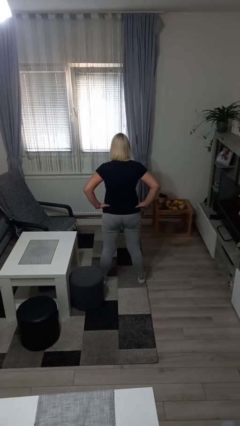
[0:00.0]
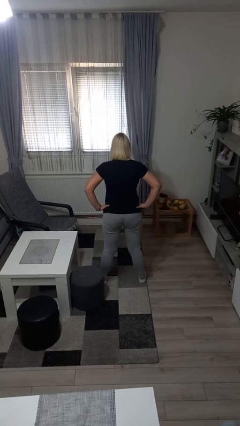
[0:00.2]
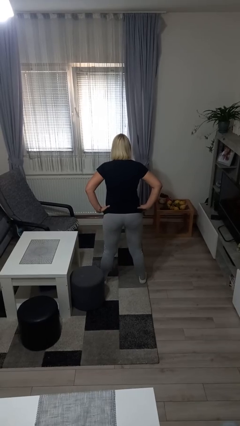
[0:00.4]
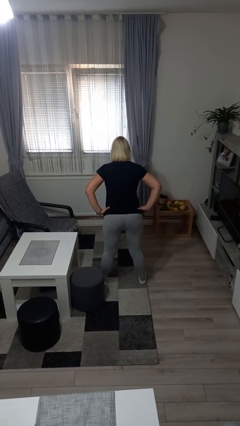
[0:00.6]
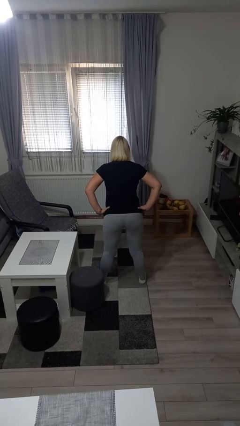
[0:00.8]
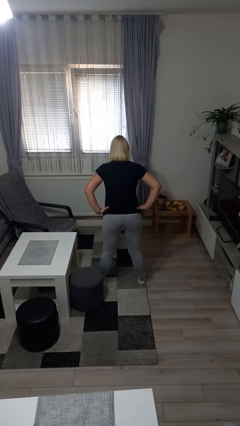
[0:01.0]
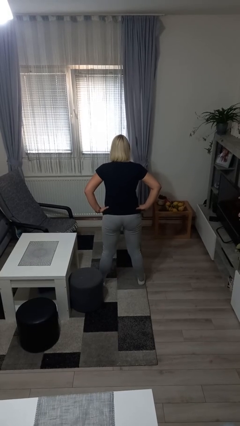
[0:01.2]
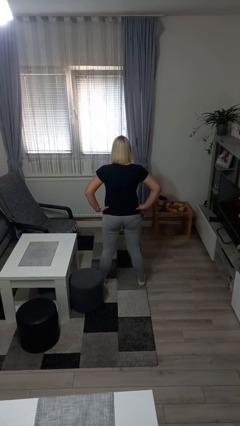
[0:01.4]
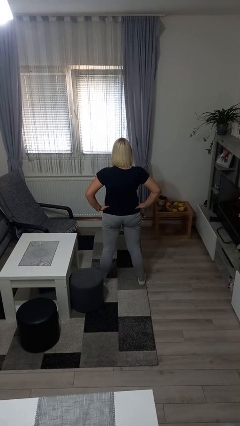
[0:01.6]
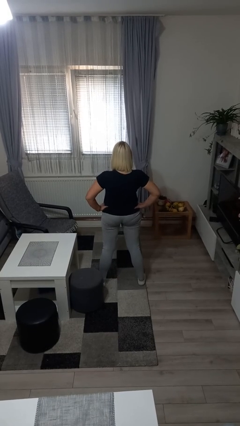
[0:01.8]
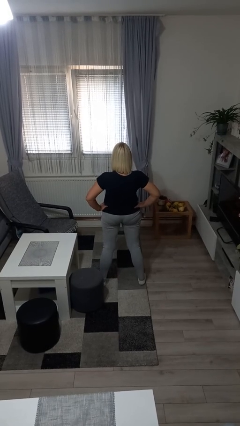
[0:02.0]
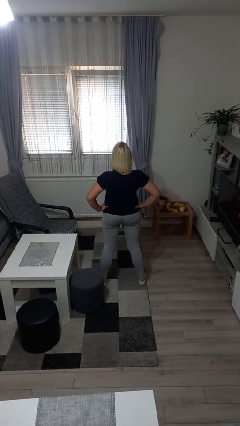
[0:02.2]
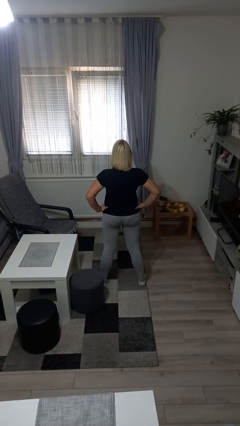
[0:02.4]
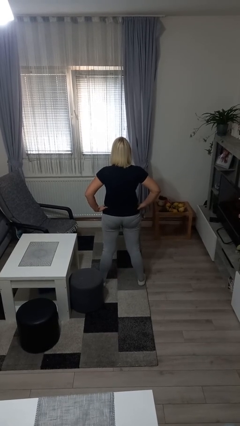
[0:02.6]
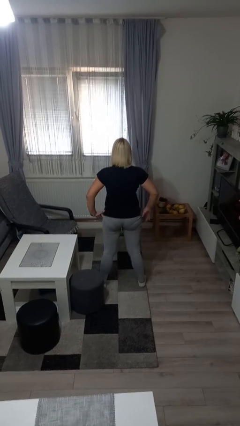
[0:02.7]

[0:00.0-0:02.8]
person wiggles hips

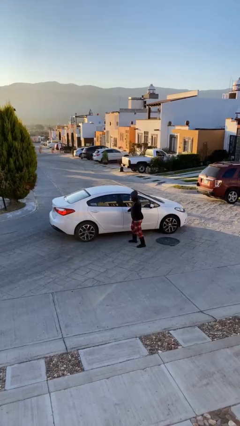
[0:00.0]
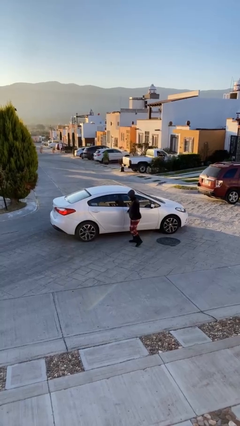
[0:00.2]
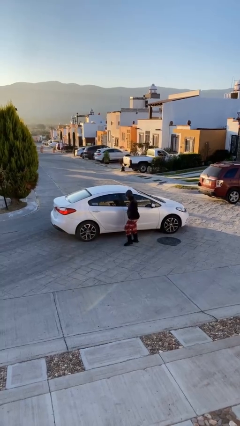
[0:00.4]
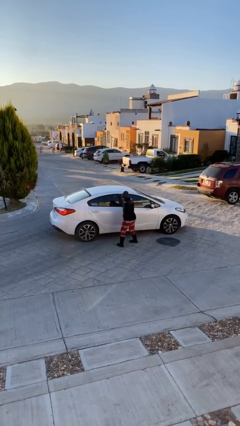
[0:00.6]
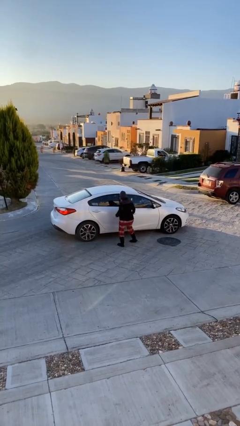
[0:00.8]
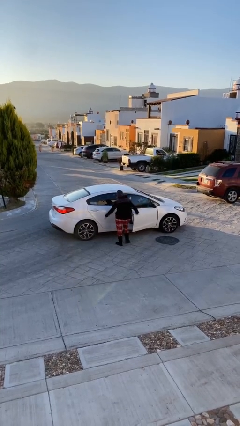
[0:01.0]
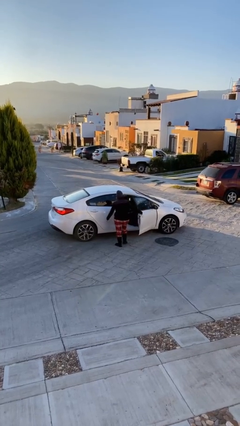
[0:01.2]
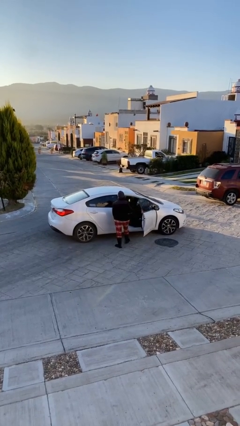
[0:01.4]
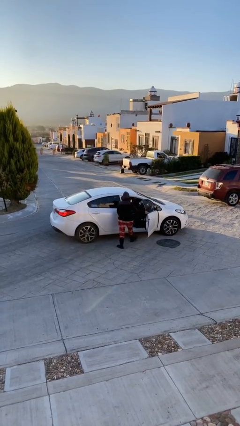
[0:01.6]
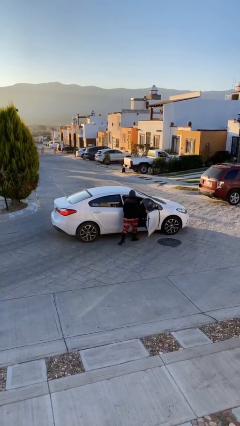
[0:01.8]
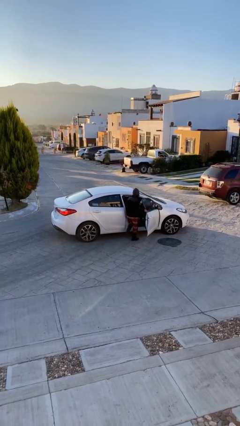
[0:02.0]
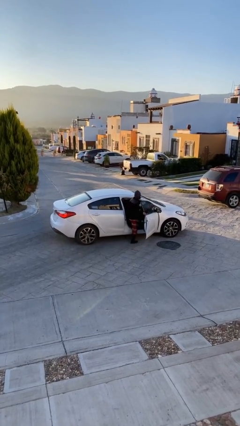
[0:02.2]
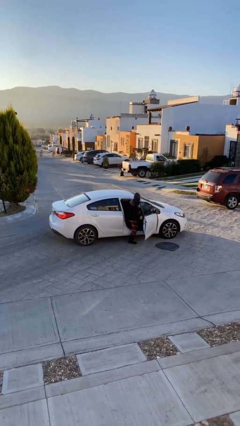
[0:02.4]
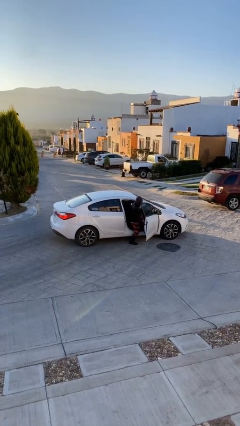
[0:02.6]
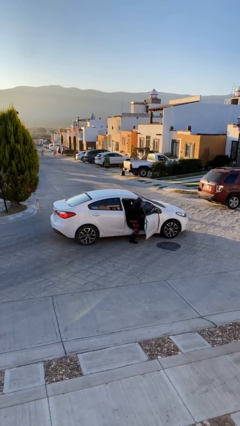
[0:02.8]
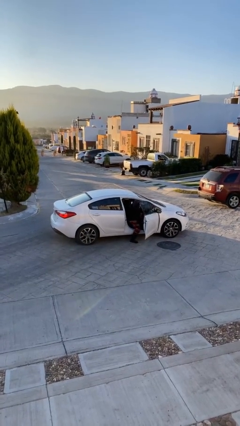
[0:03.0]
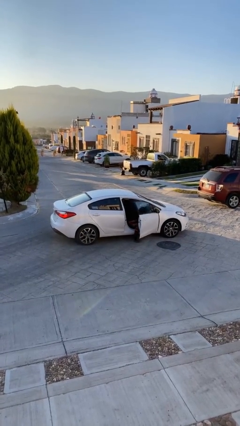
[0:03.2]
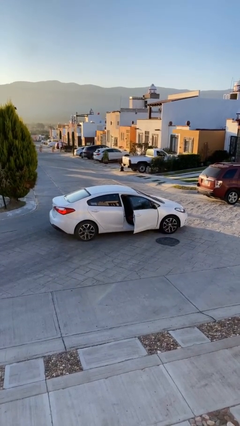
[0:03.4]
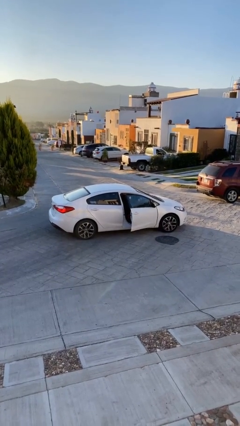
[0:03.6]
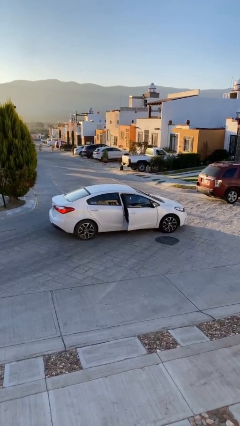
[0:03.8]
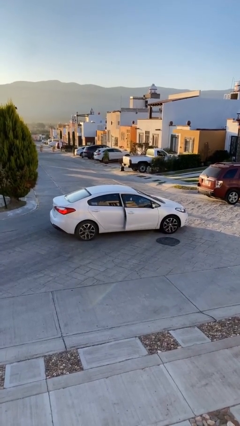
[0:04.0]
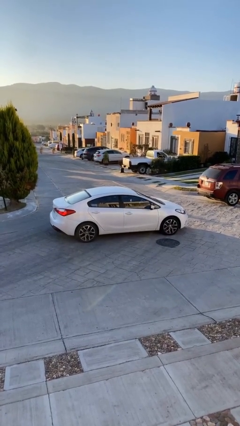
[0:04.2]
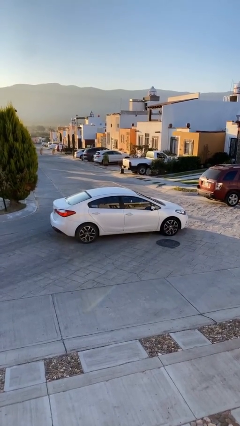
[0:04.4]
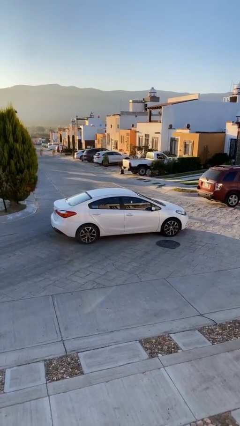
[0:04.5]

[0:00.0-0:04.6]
car picks up person

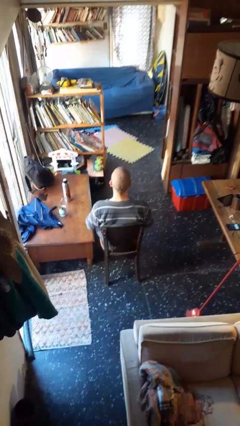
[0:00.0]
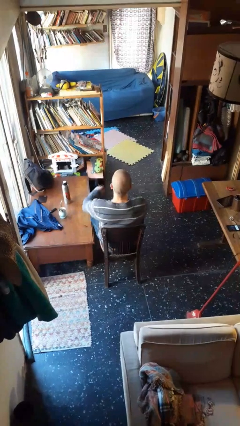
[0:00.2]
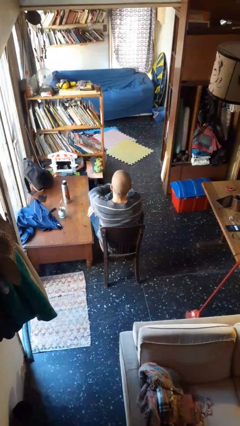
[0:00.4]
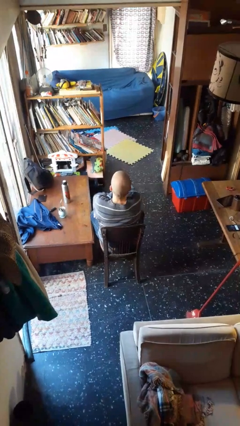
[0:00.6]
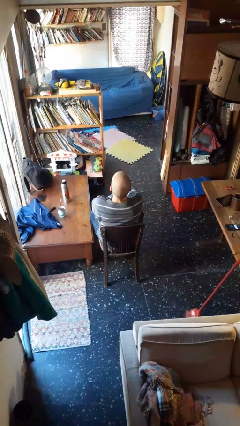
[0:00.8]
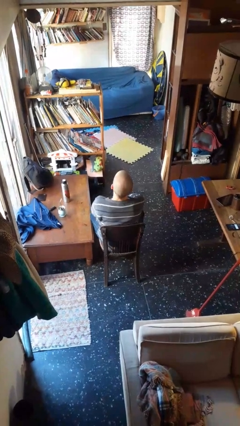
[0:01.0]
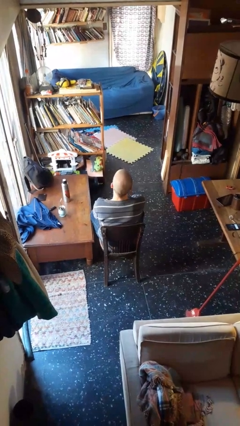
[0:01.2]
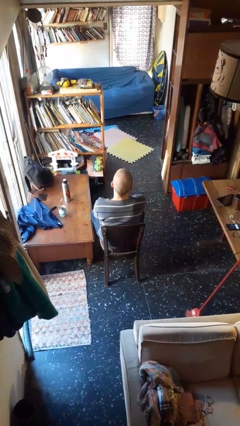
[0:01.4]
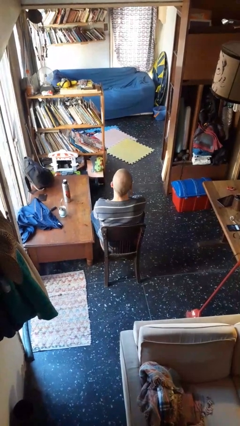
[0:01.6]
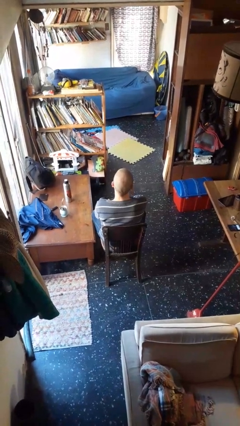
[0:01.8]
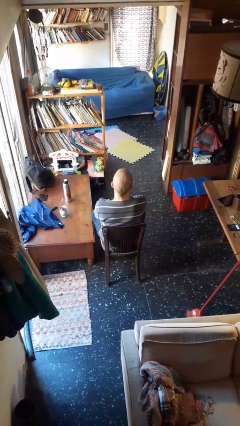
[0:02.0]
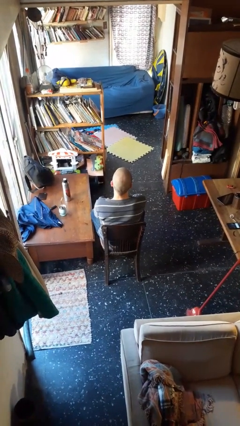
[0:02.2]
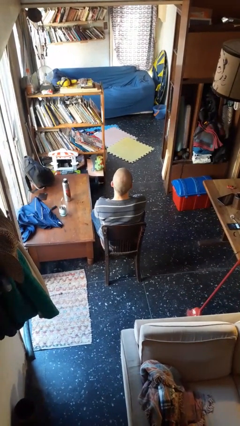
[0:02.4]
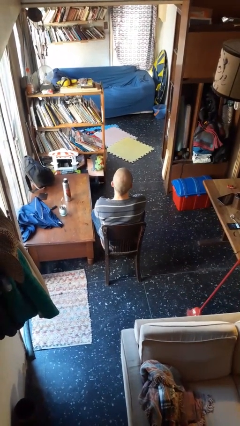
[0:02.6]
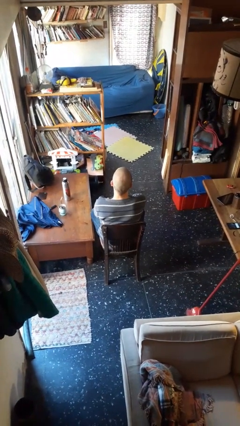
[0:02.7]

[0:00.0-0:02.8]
person crosses arms

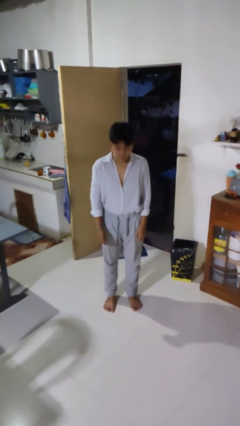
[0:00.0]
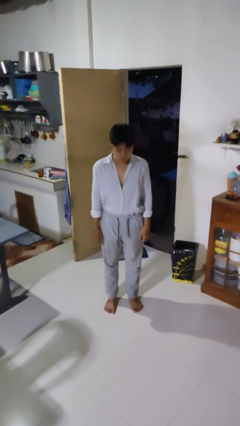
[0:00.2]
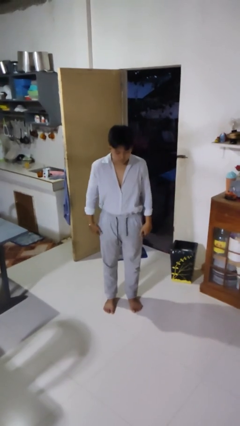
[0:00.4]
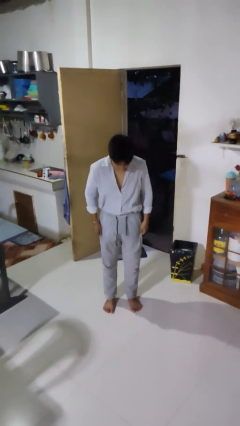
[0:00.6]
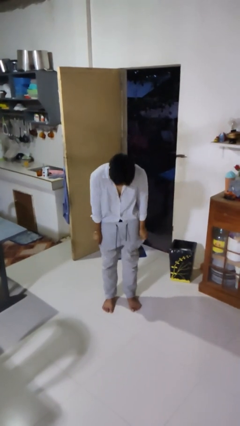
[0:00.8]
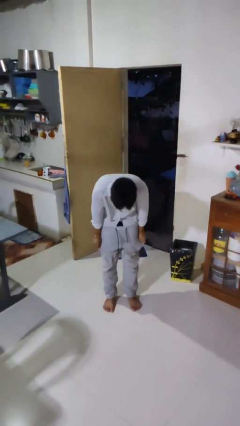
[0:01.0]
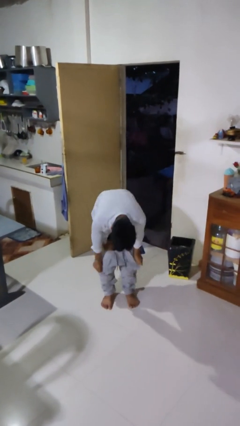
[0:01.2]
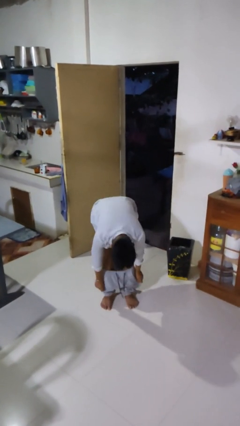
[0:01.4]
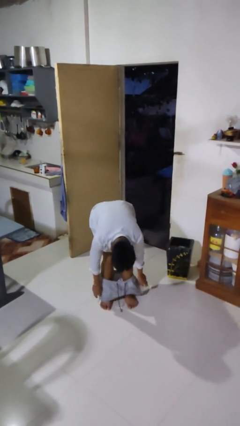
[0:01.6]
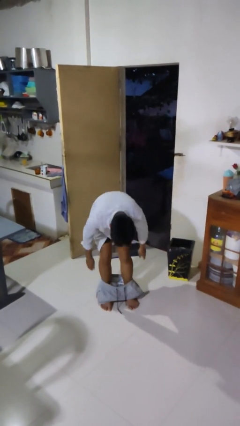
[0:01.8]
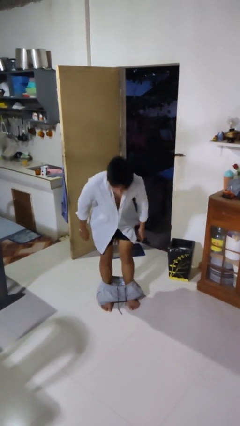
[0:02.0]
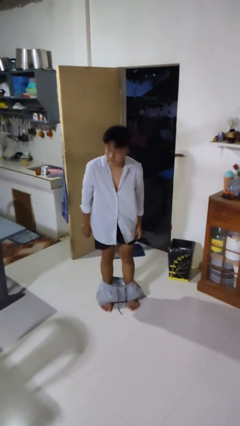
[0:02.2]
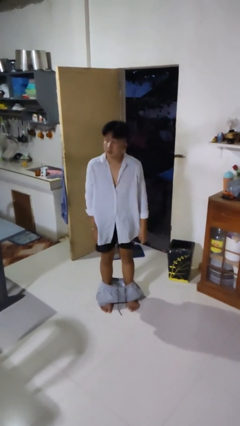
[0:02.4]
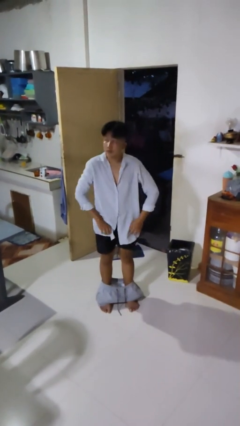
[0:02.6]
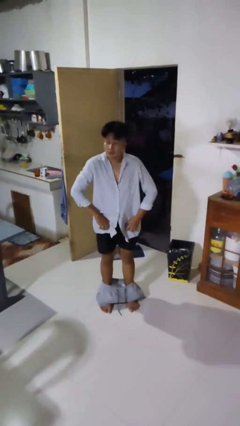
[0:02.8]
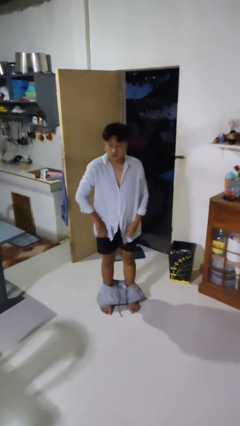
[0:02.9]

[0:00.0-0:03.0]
person takes off pants

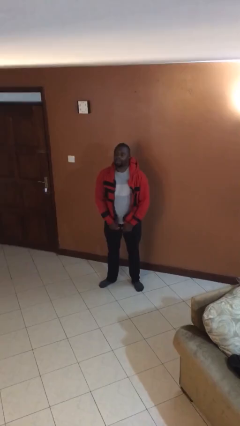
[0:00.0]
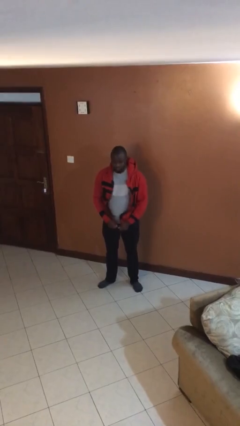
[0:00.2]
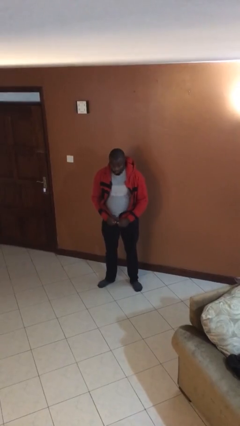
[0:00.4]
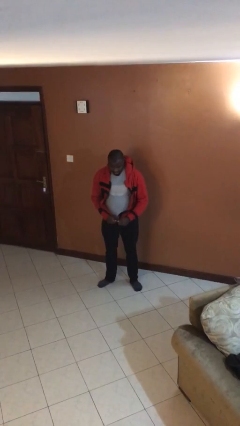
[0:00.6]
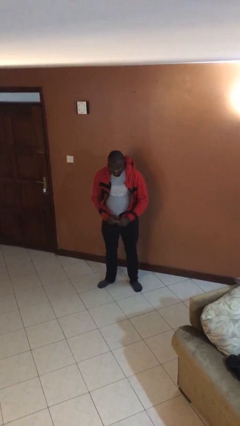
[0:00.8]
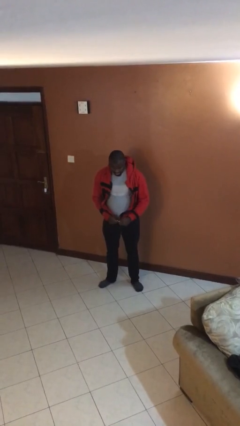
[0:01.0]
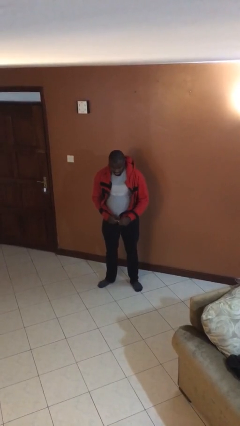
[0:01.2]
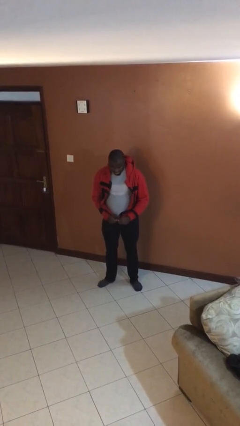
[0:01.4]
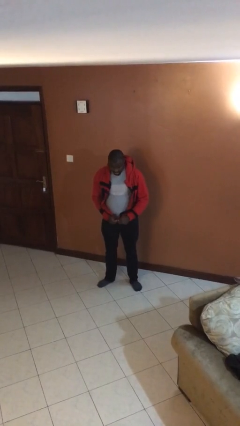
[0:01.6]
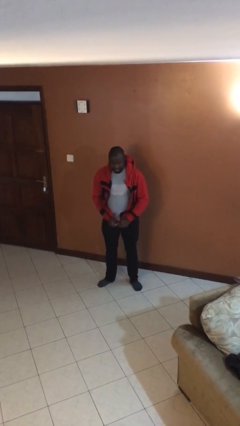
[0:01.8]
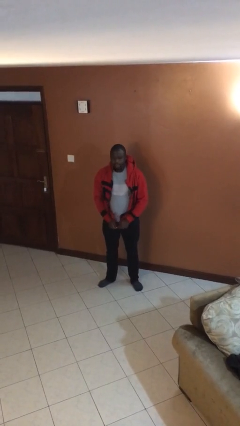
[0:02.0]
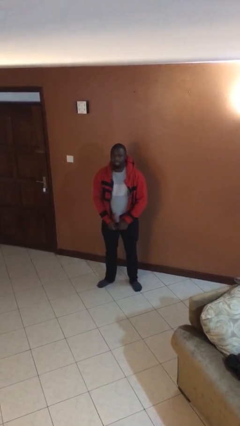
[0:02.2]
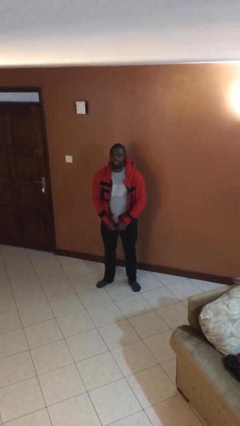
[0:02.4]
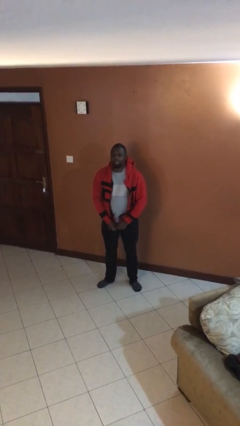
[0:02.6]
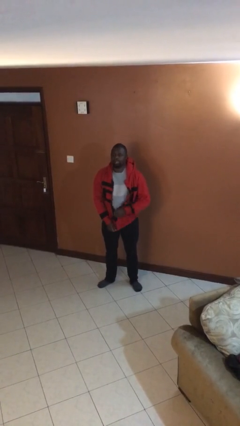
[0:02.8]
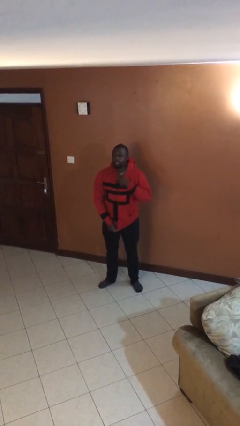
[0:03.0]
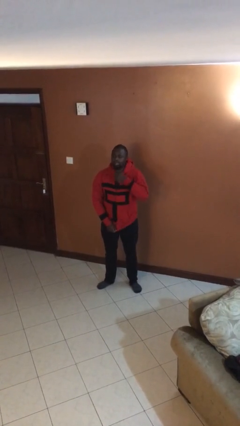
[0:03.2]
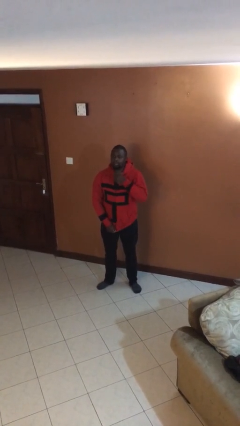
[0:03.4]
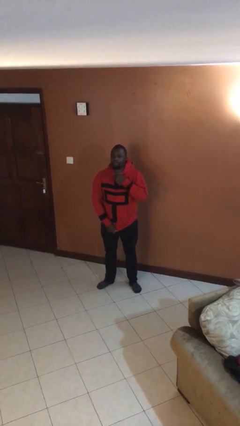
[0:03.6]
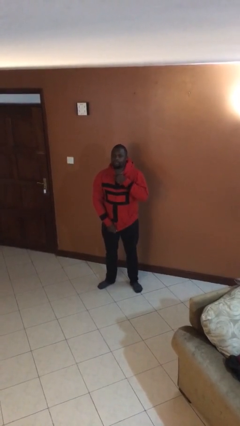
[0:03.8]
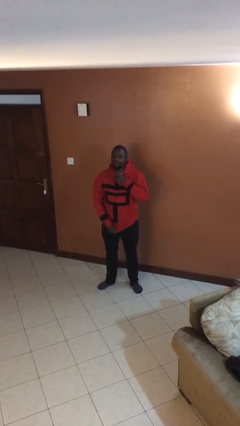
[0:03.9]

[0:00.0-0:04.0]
person zips up jacket

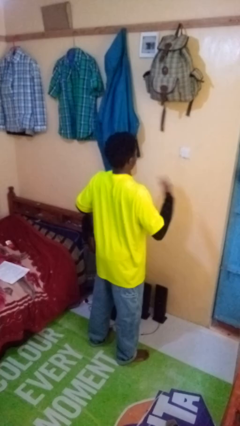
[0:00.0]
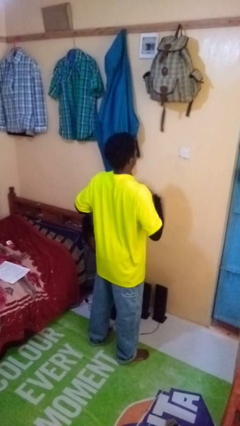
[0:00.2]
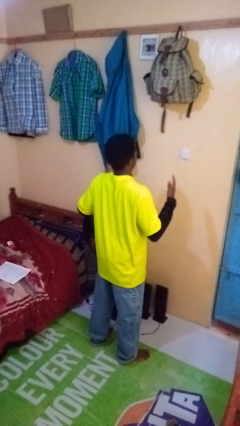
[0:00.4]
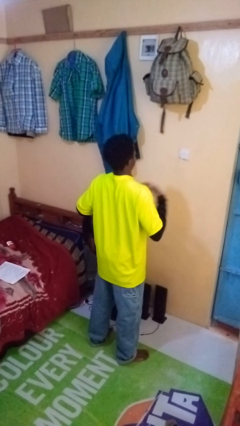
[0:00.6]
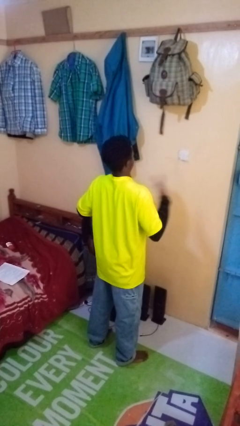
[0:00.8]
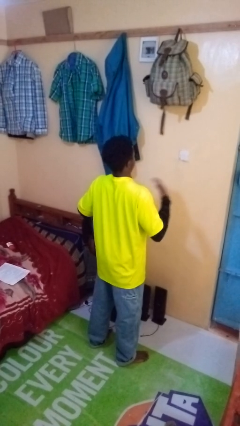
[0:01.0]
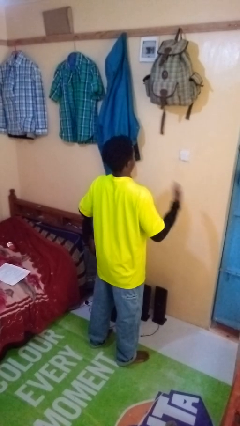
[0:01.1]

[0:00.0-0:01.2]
person drums on chest
